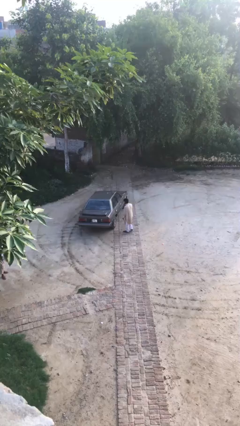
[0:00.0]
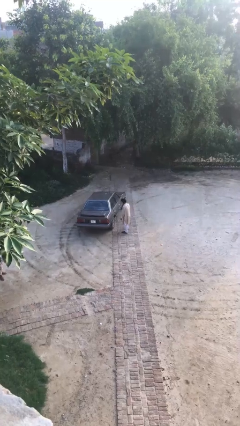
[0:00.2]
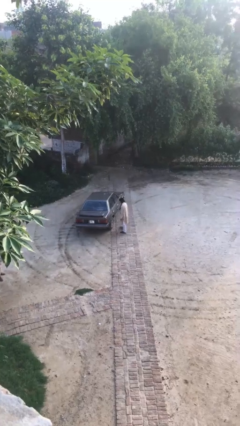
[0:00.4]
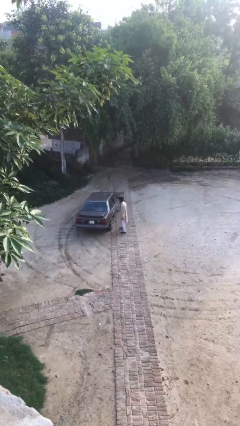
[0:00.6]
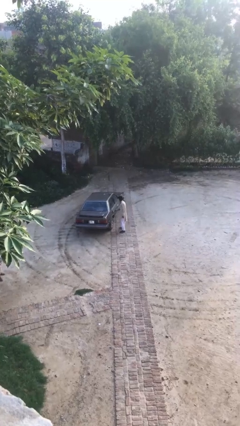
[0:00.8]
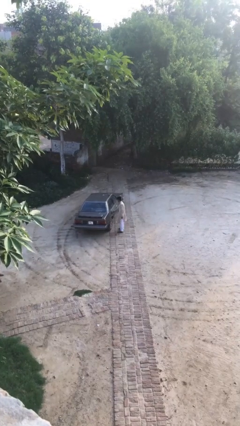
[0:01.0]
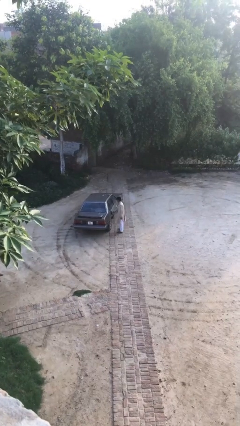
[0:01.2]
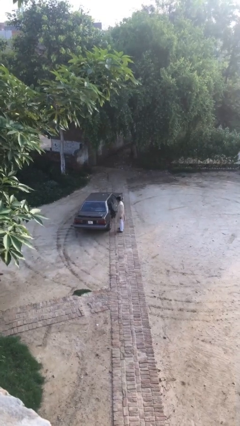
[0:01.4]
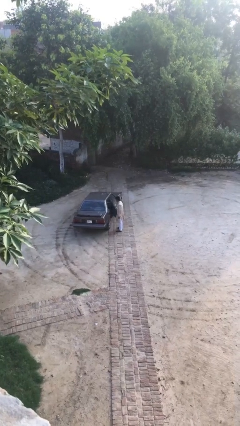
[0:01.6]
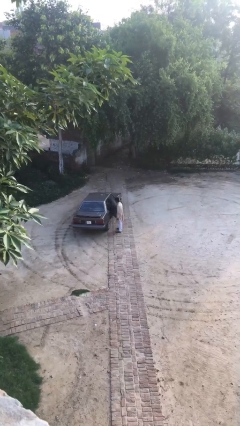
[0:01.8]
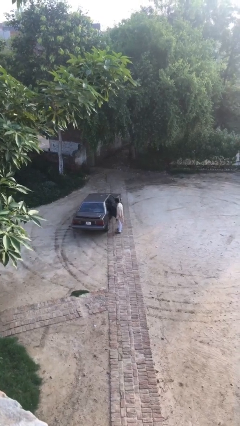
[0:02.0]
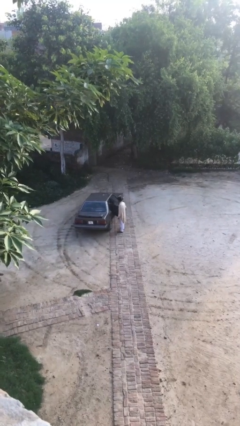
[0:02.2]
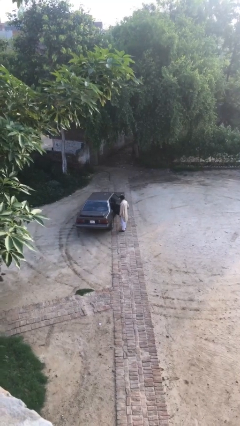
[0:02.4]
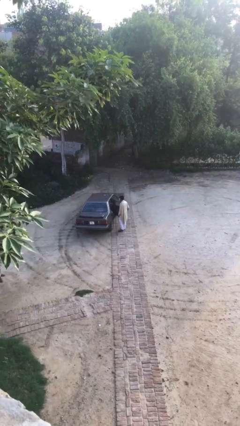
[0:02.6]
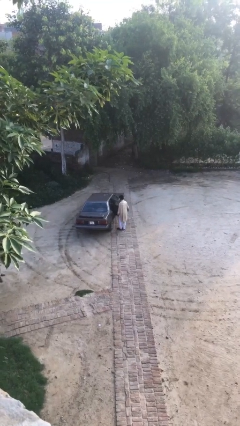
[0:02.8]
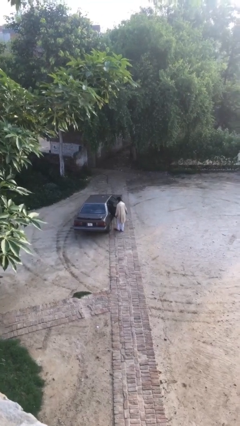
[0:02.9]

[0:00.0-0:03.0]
person opens car door

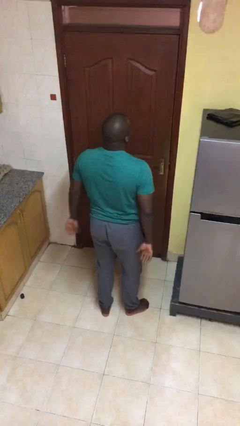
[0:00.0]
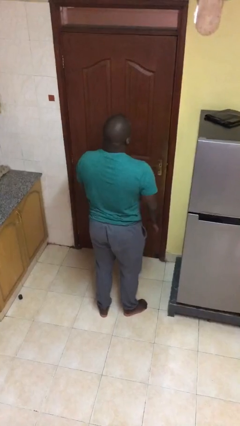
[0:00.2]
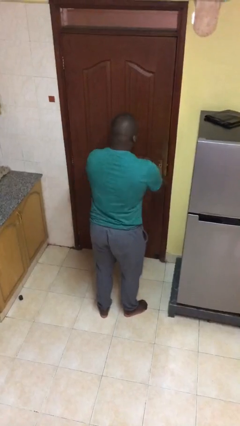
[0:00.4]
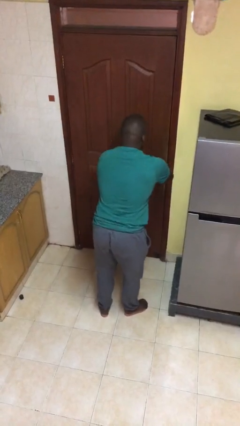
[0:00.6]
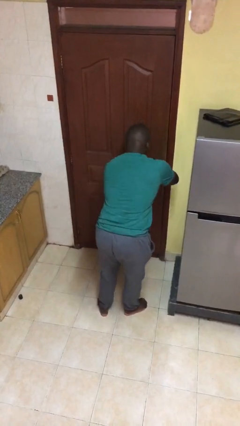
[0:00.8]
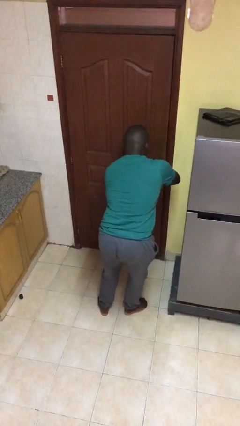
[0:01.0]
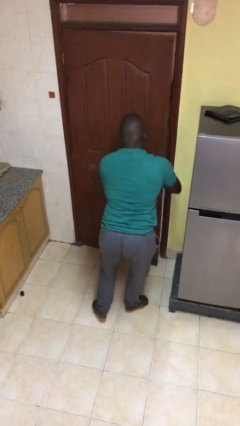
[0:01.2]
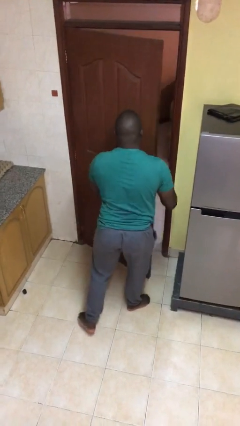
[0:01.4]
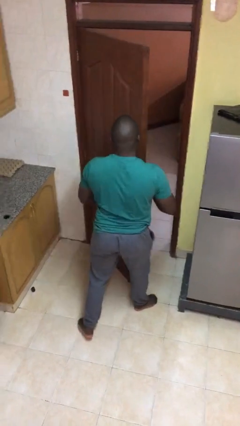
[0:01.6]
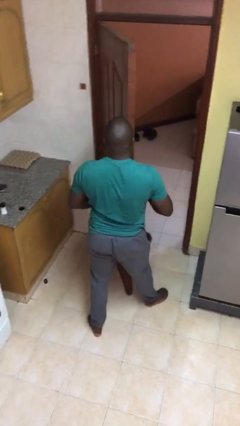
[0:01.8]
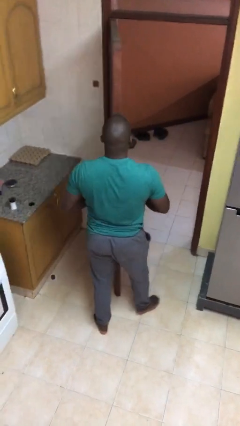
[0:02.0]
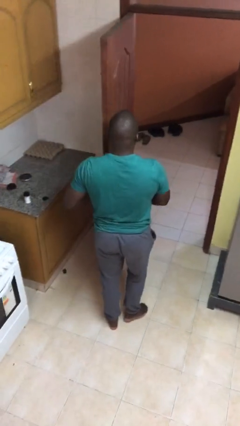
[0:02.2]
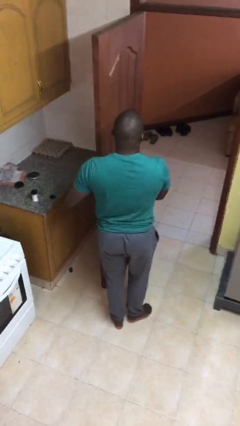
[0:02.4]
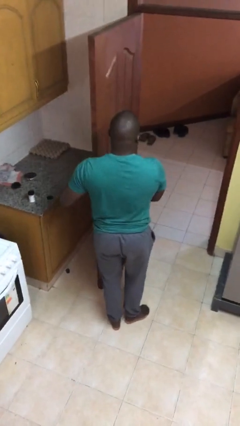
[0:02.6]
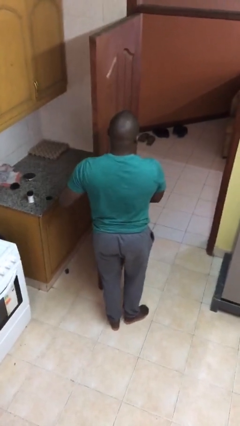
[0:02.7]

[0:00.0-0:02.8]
person opens facility door

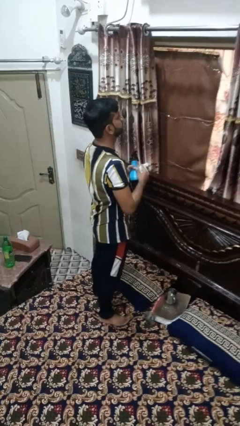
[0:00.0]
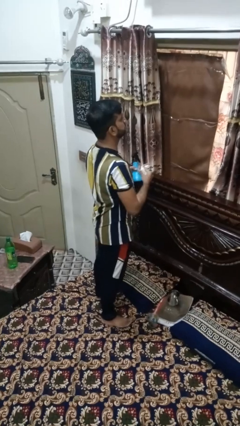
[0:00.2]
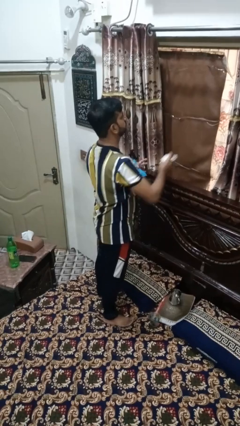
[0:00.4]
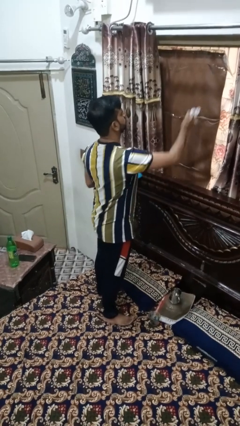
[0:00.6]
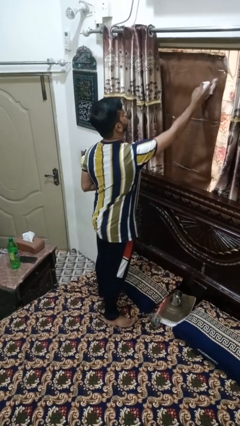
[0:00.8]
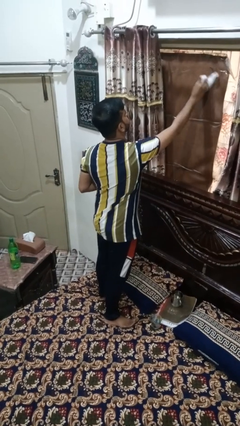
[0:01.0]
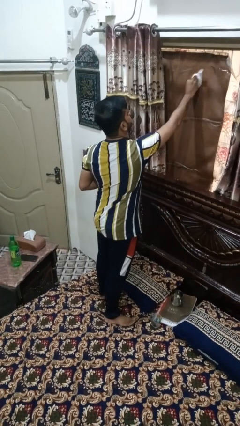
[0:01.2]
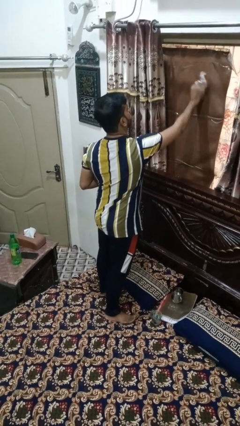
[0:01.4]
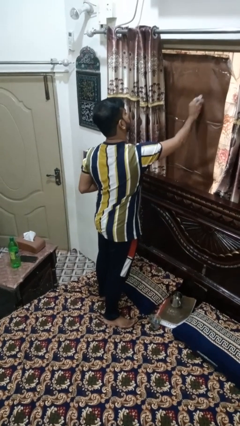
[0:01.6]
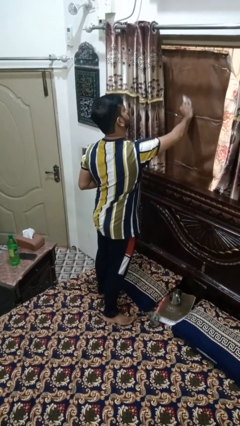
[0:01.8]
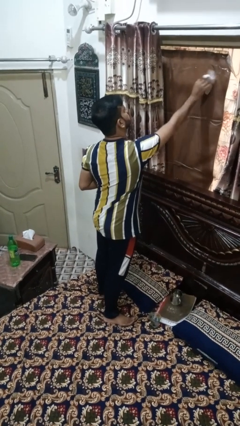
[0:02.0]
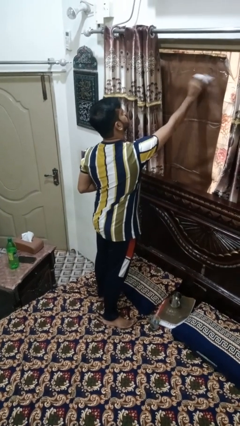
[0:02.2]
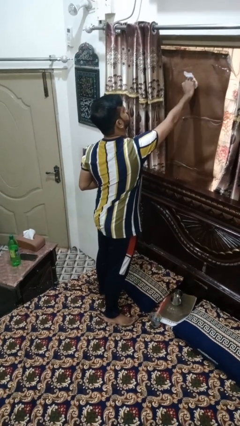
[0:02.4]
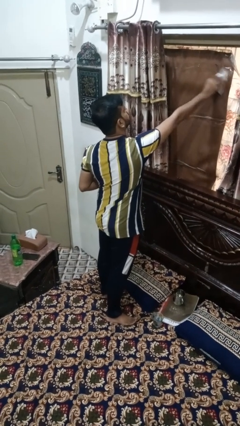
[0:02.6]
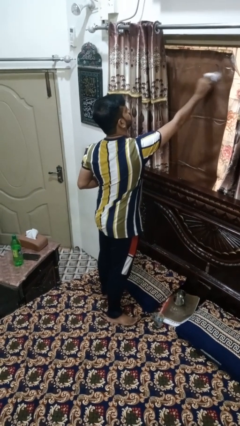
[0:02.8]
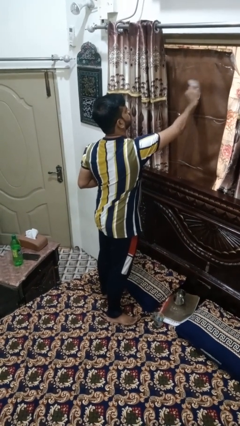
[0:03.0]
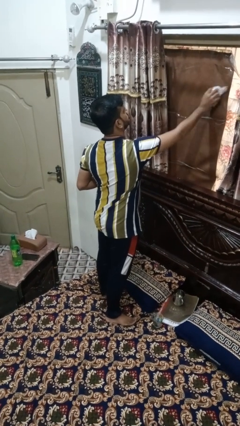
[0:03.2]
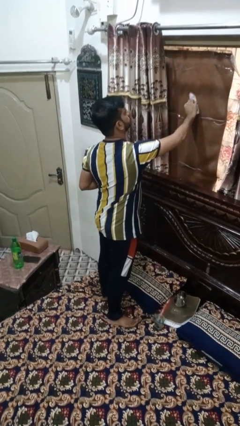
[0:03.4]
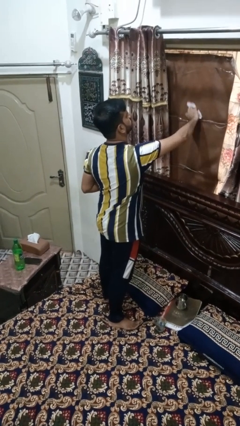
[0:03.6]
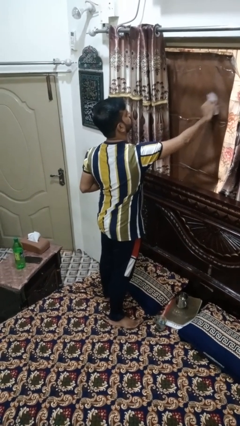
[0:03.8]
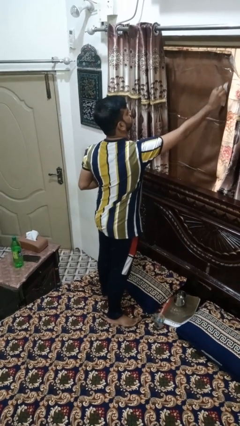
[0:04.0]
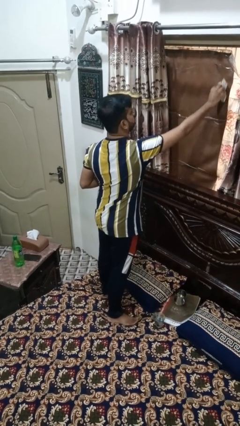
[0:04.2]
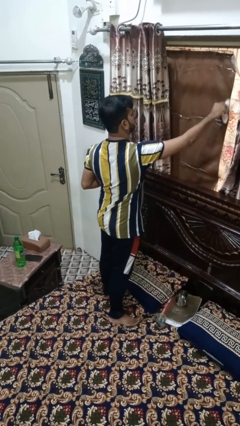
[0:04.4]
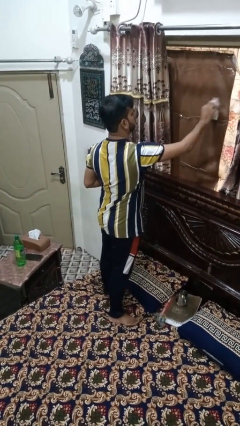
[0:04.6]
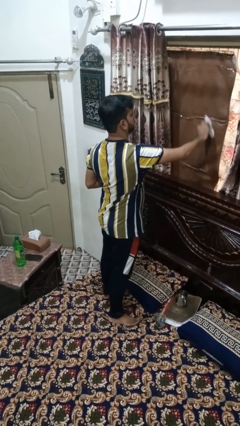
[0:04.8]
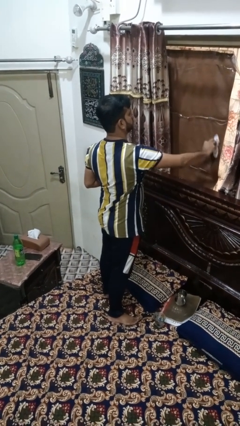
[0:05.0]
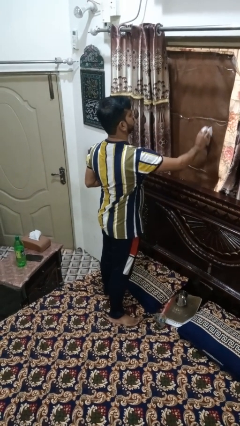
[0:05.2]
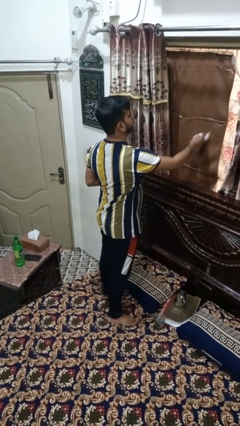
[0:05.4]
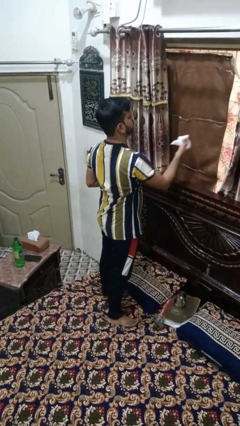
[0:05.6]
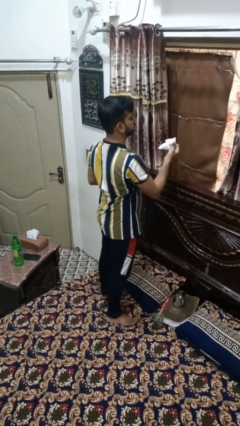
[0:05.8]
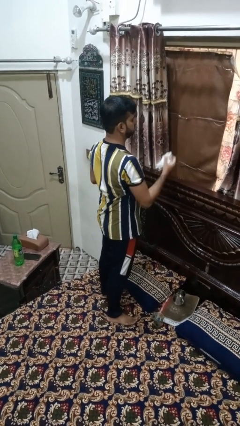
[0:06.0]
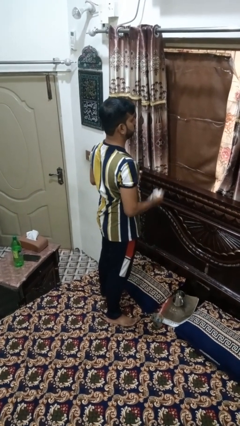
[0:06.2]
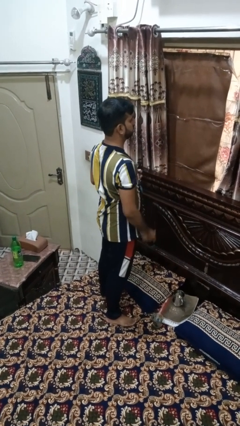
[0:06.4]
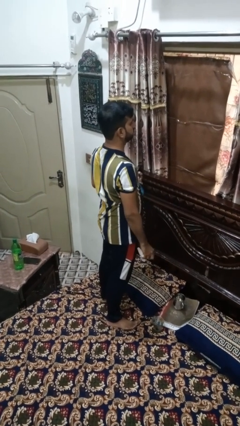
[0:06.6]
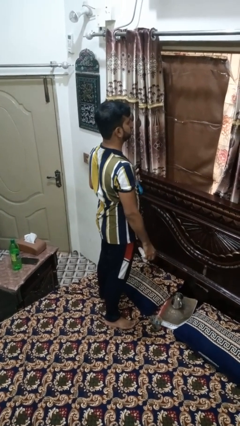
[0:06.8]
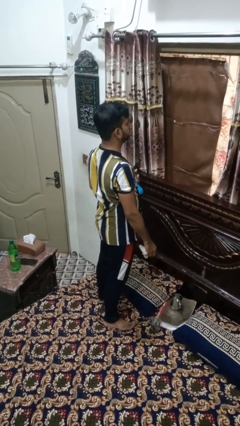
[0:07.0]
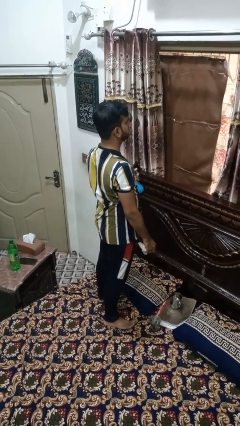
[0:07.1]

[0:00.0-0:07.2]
person washes window

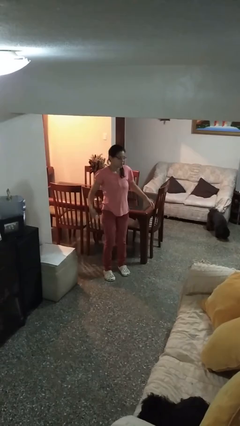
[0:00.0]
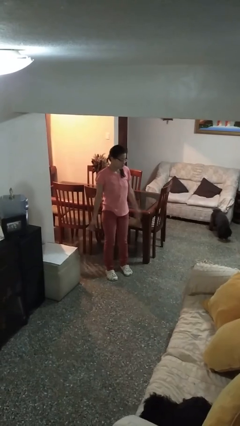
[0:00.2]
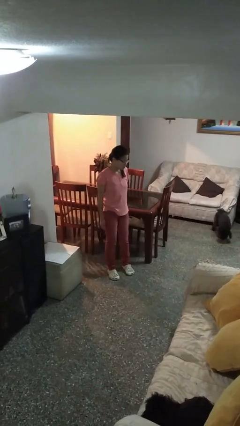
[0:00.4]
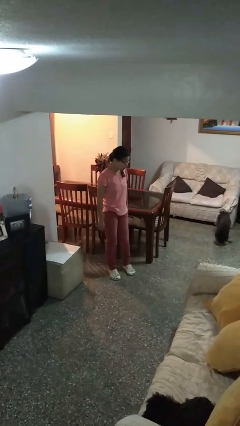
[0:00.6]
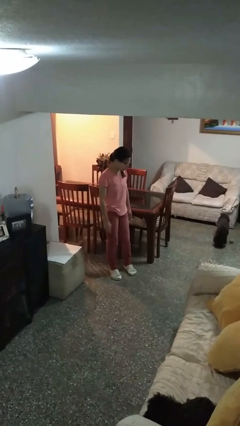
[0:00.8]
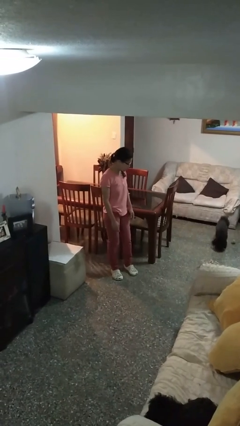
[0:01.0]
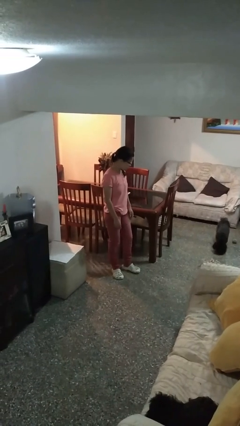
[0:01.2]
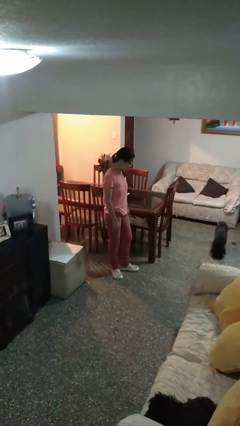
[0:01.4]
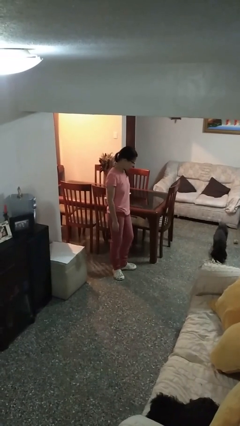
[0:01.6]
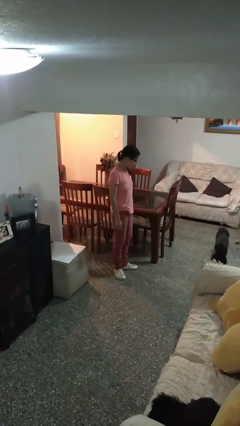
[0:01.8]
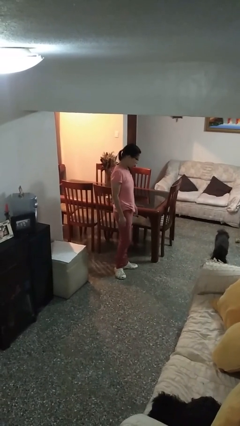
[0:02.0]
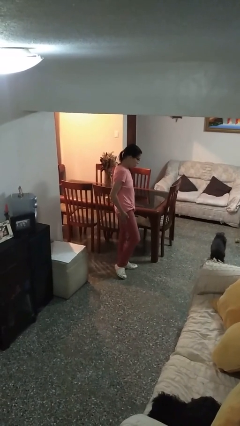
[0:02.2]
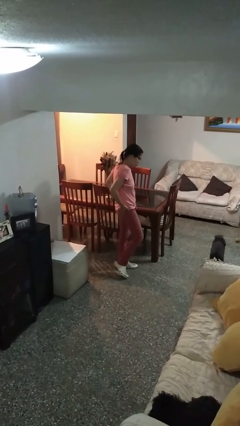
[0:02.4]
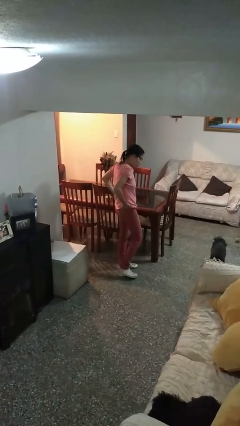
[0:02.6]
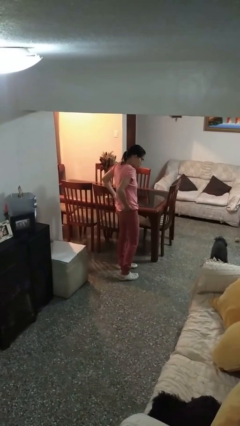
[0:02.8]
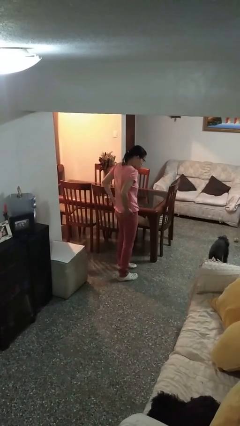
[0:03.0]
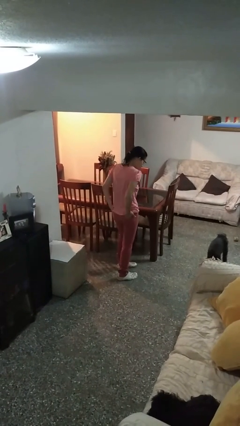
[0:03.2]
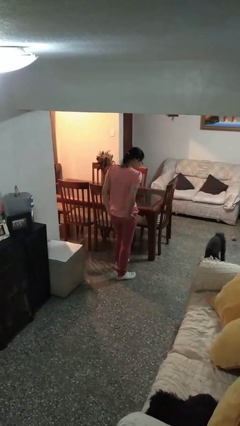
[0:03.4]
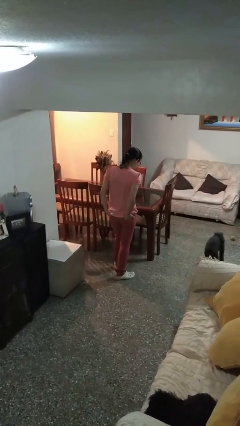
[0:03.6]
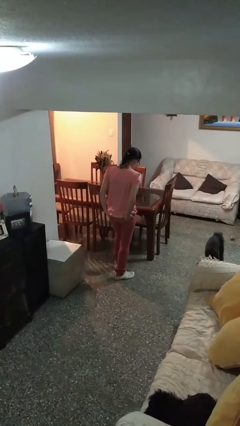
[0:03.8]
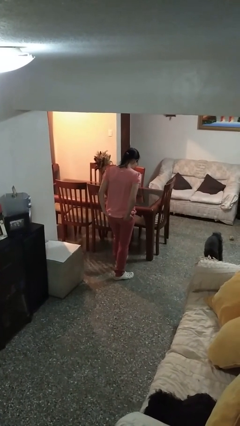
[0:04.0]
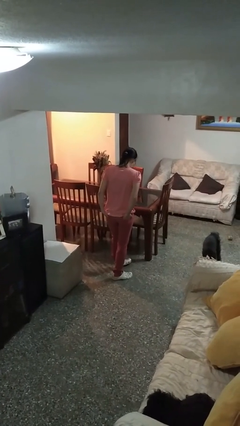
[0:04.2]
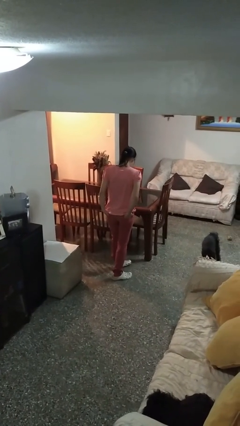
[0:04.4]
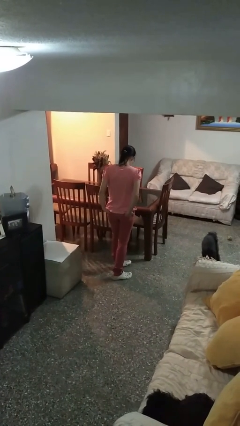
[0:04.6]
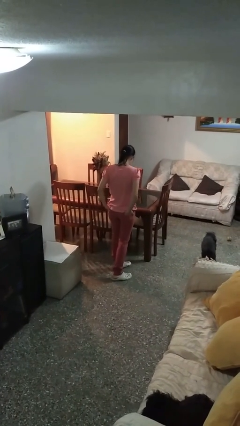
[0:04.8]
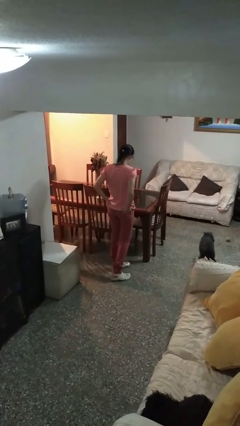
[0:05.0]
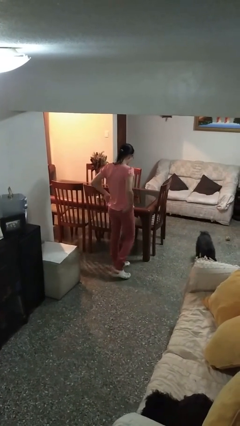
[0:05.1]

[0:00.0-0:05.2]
person puts hands in back pockets
